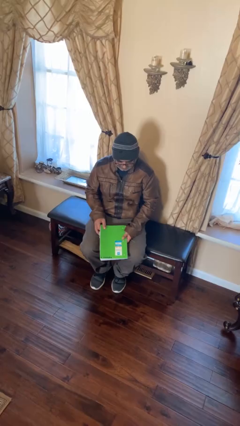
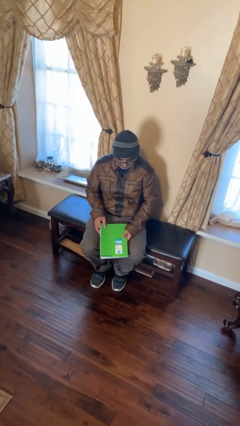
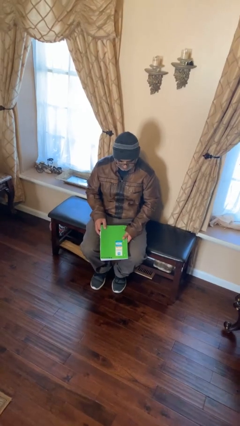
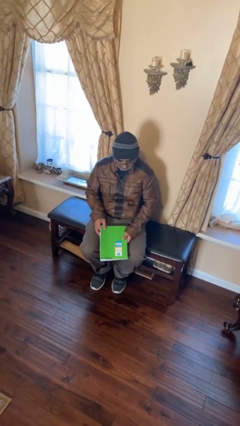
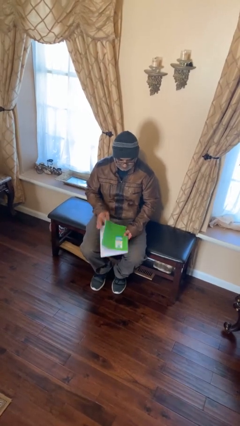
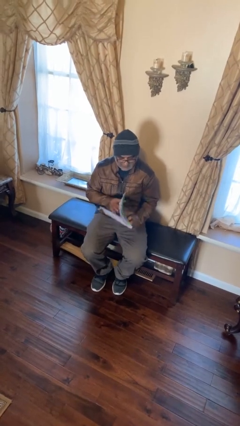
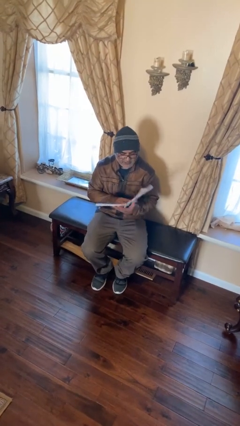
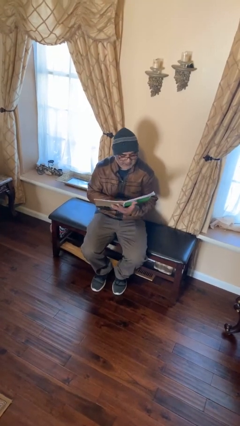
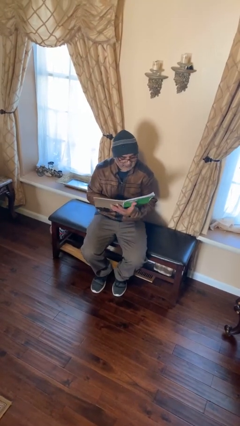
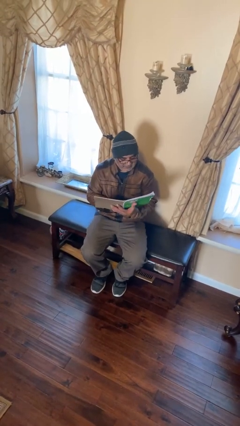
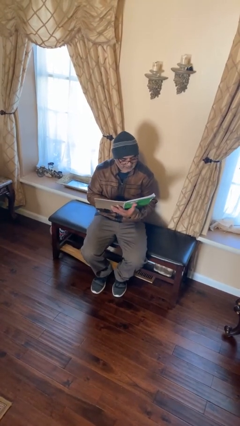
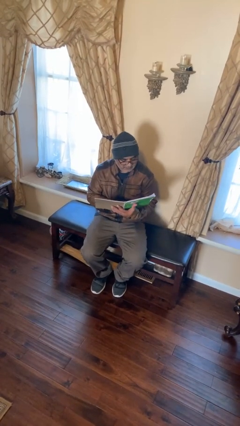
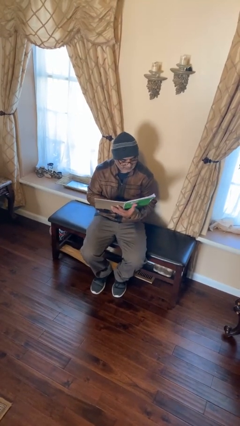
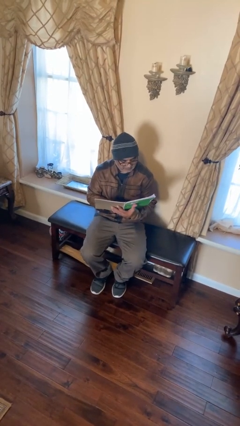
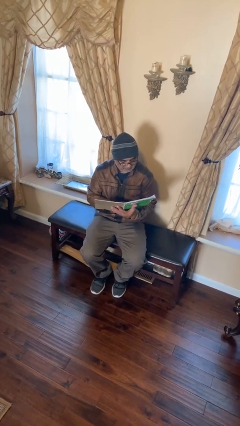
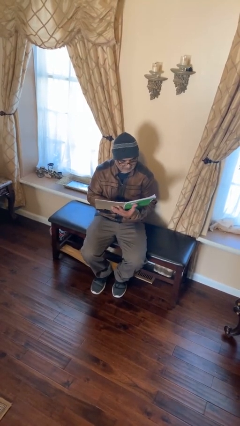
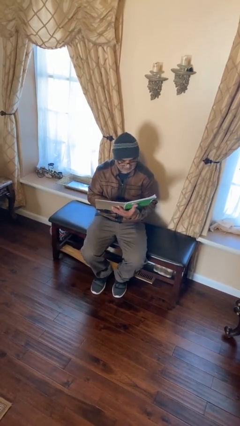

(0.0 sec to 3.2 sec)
person reads document

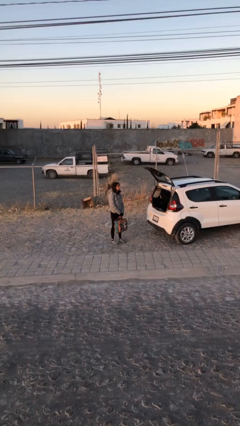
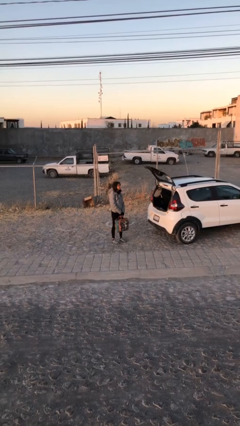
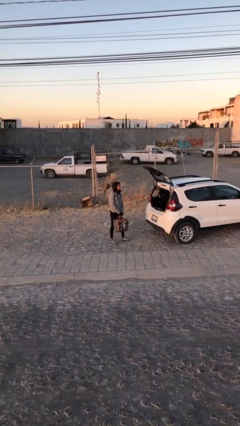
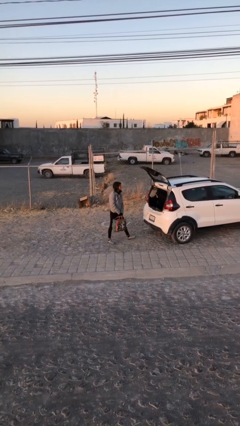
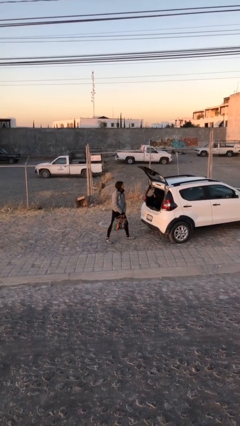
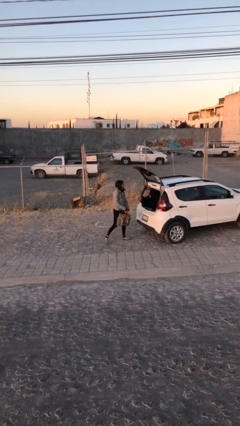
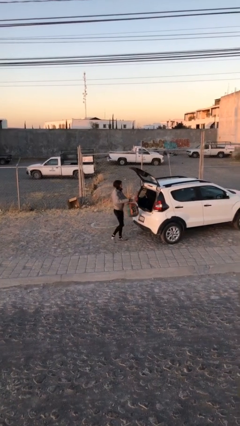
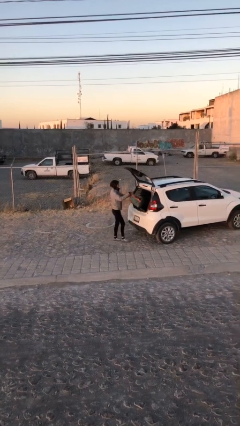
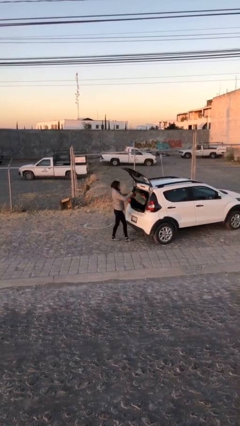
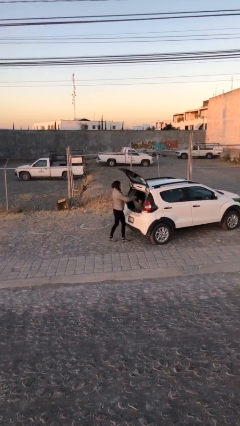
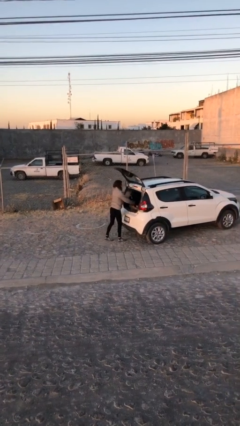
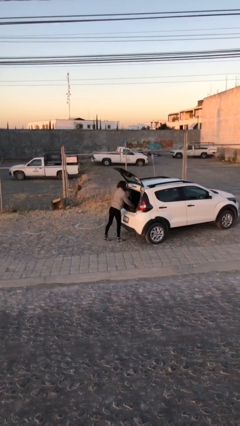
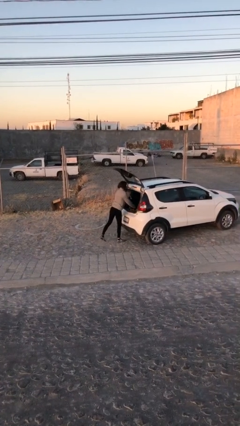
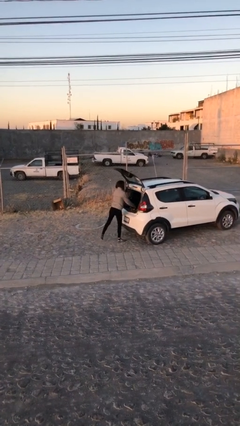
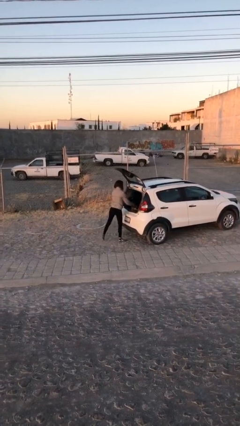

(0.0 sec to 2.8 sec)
person loads car

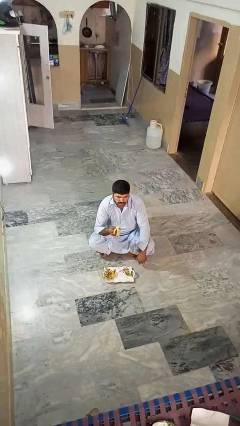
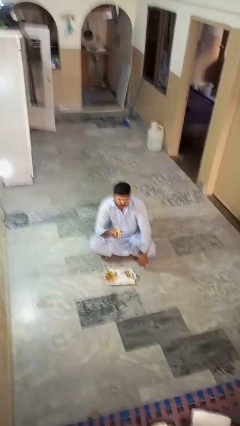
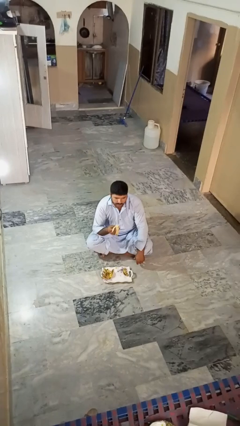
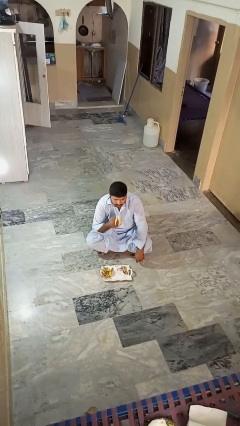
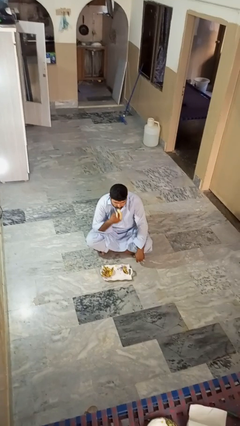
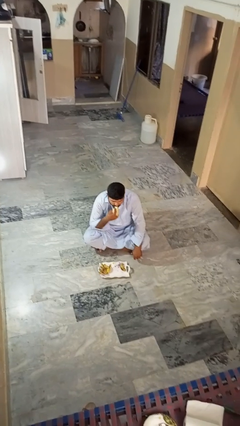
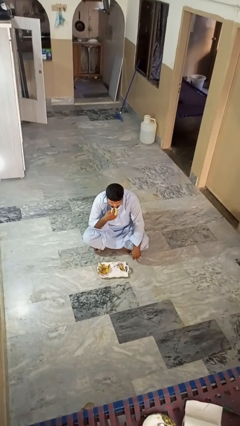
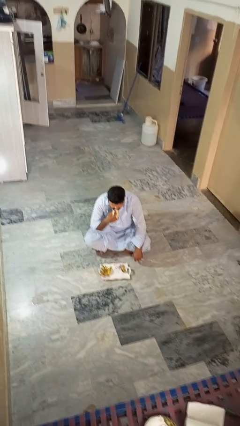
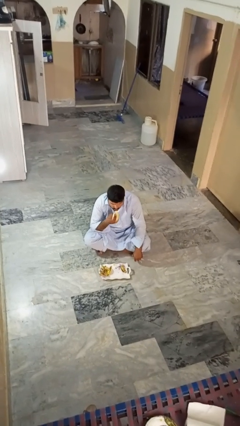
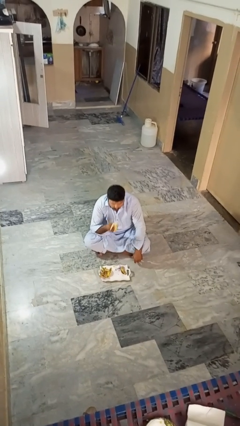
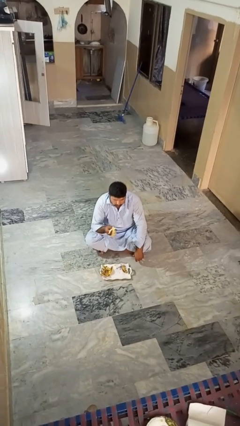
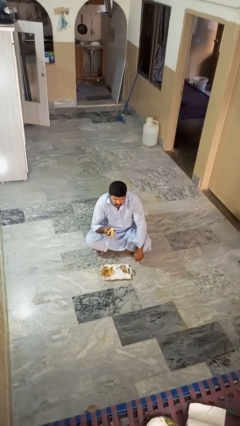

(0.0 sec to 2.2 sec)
person eats banana

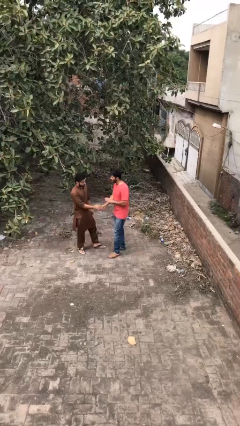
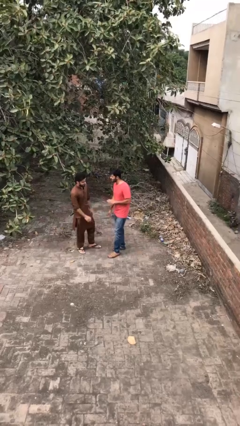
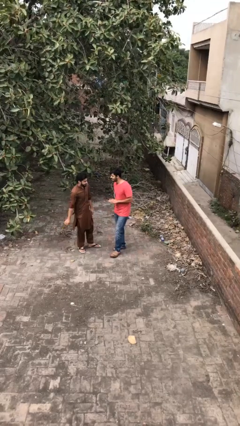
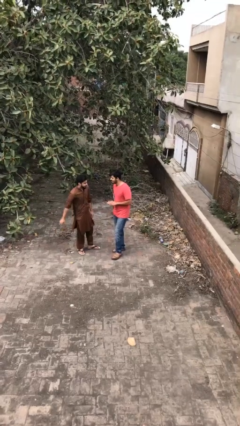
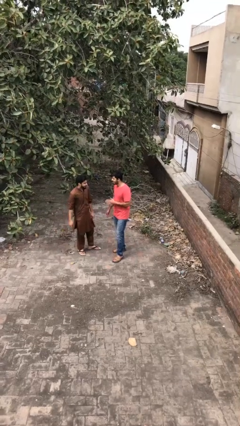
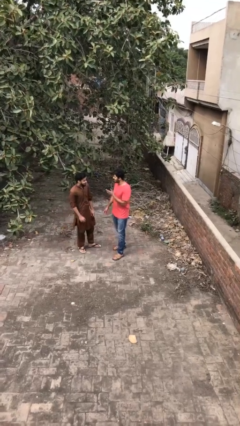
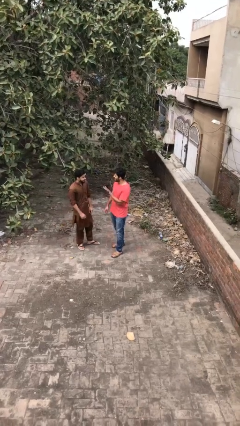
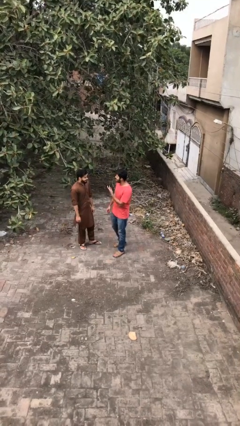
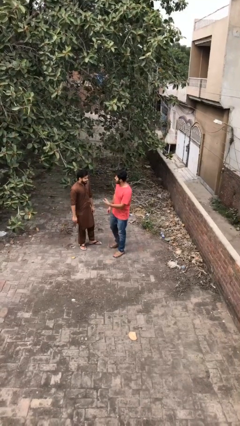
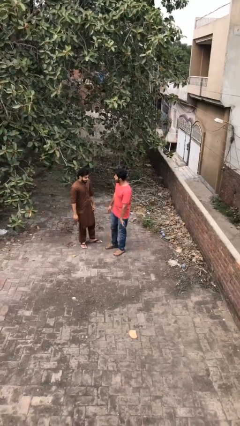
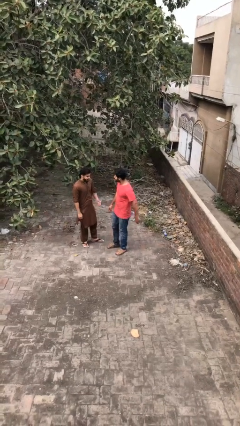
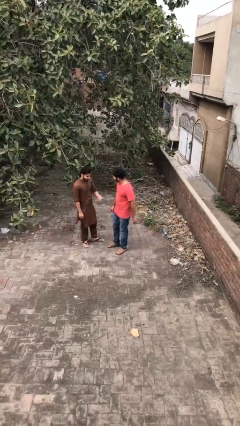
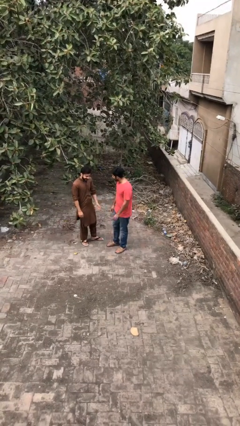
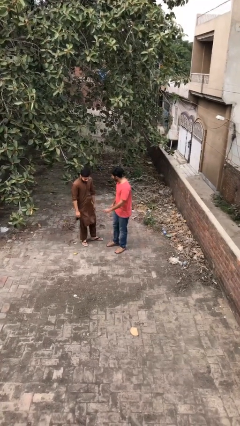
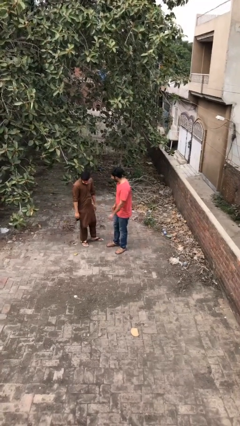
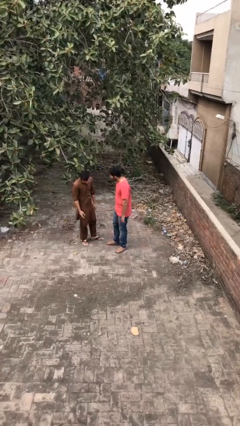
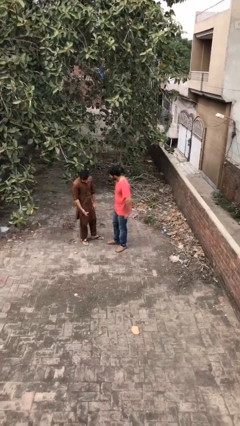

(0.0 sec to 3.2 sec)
person talks to person

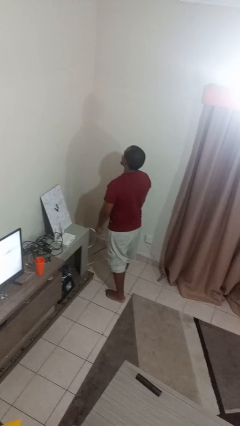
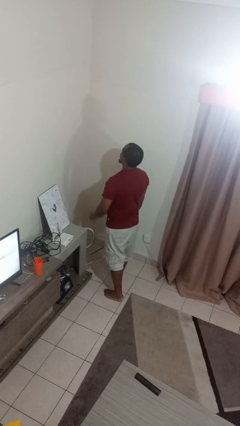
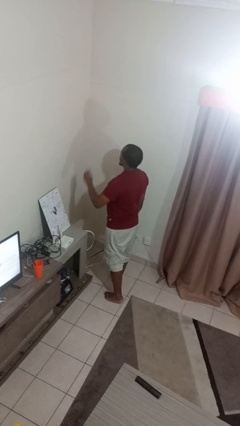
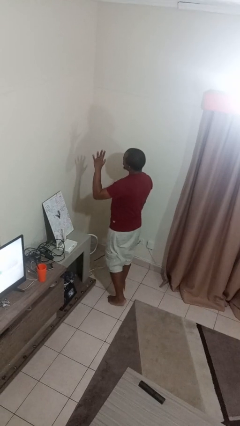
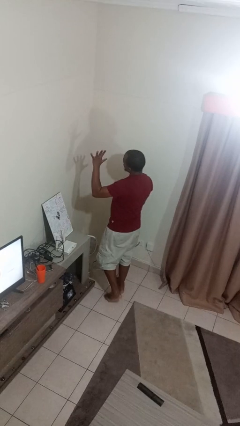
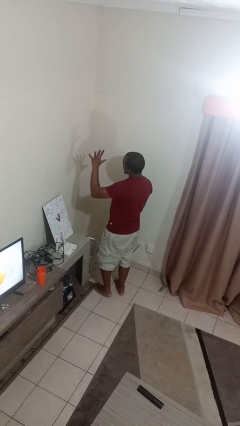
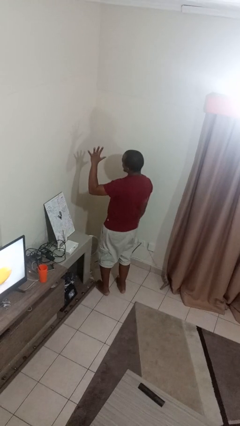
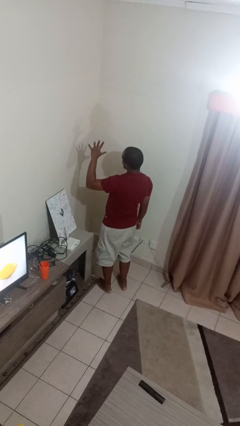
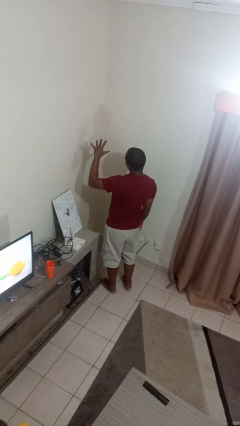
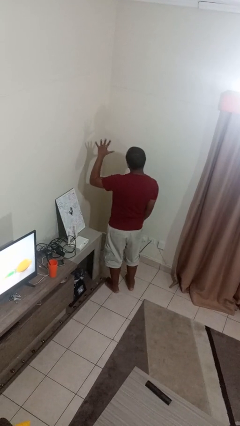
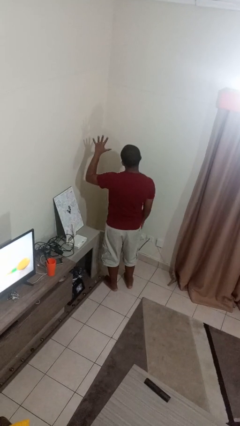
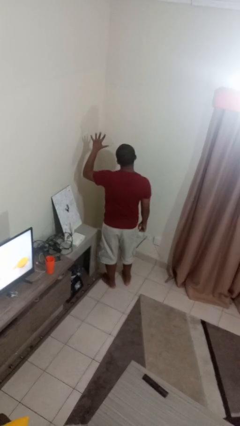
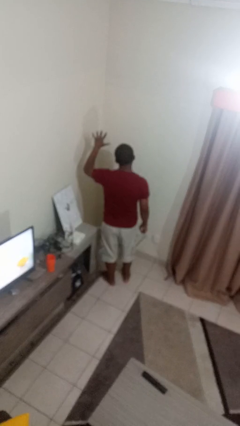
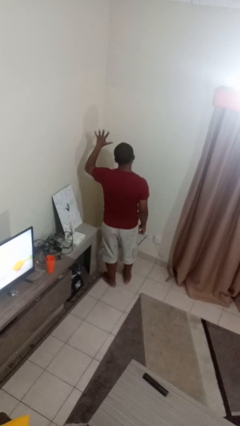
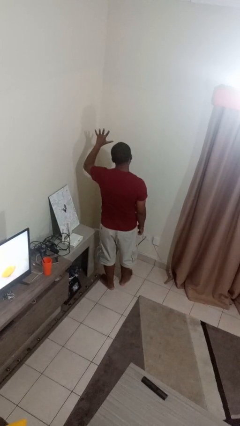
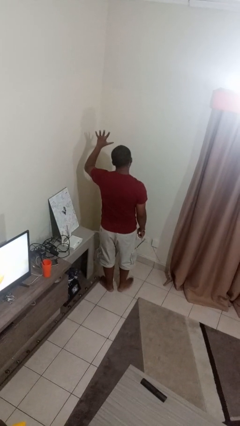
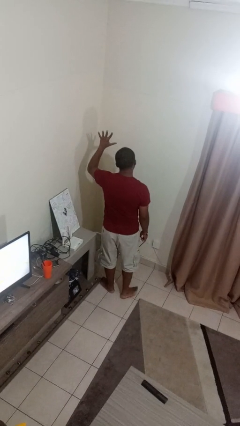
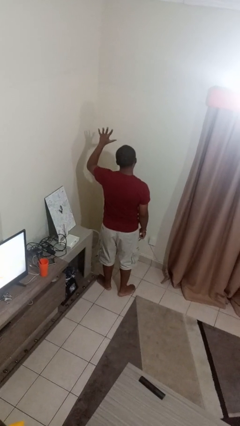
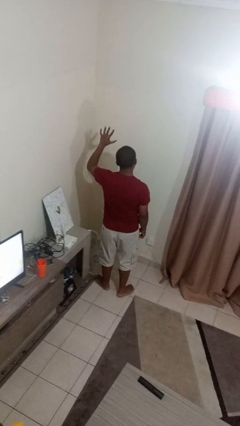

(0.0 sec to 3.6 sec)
person gestures number five

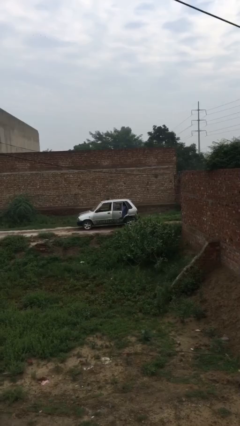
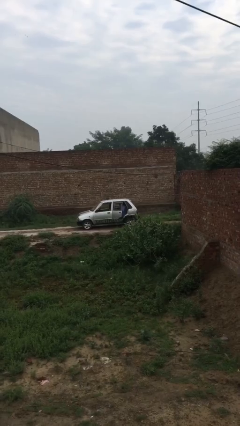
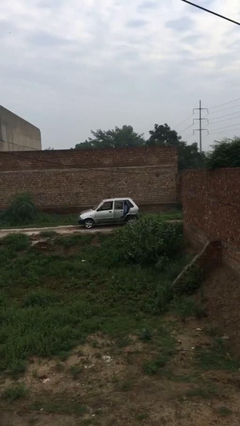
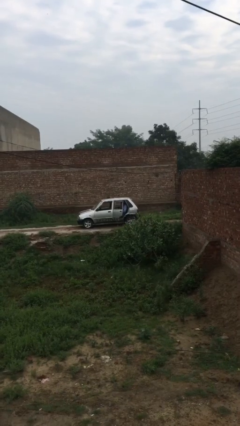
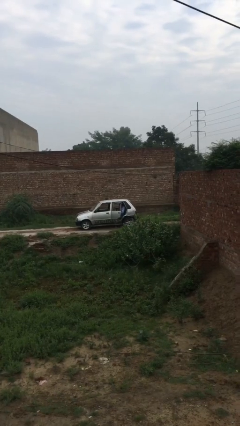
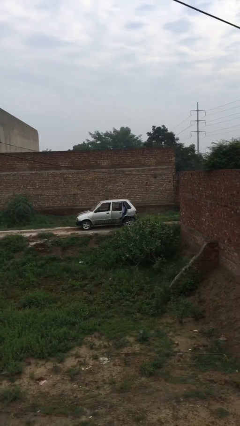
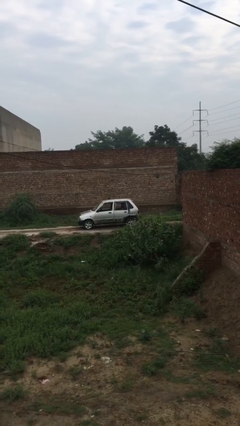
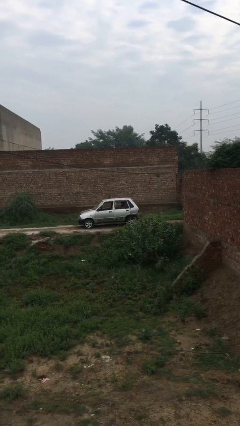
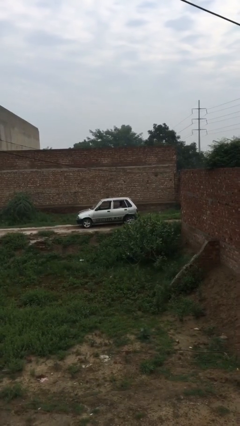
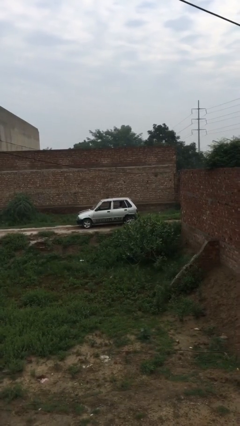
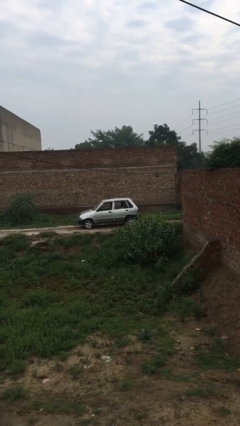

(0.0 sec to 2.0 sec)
person closes car door
